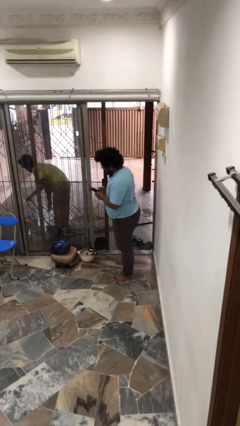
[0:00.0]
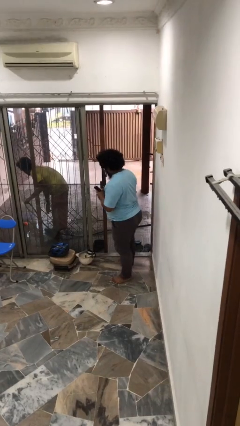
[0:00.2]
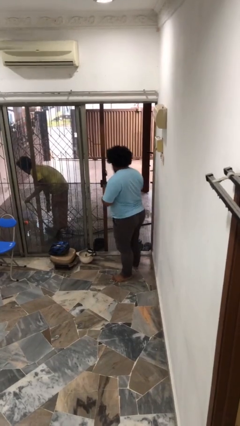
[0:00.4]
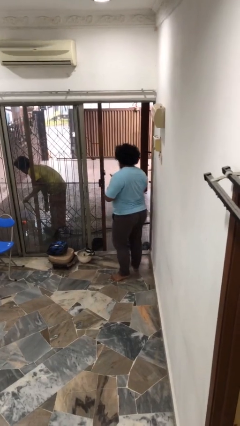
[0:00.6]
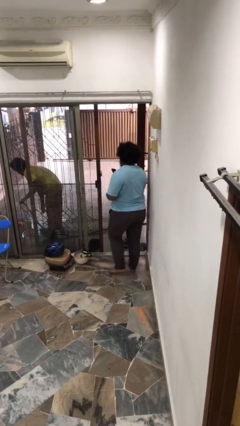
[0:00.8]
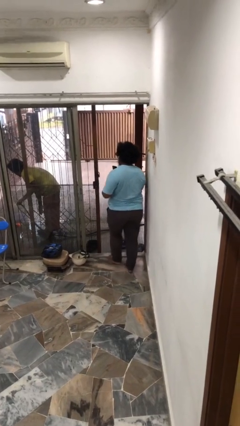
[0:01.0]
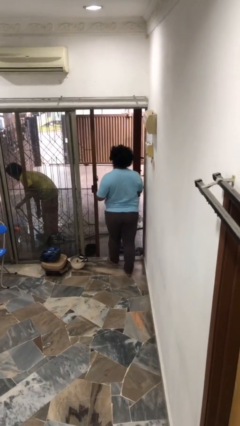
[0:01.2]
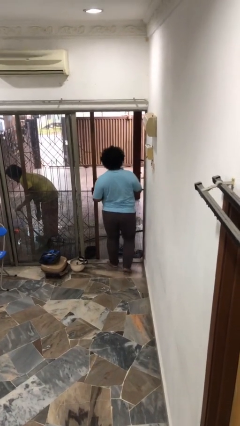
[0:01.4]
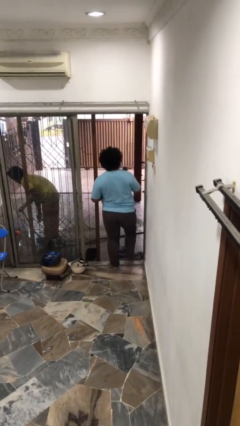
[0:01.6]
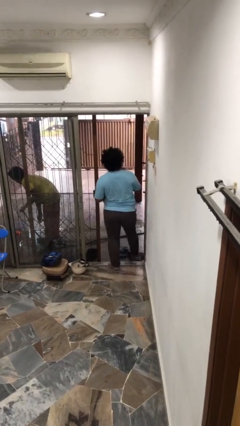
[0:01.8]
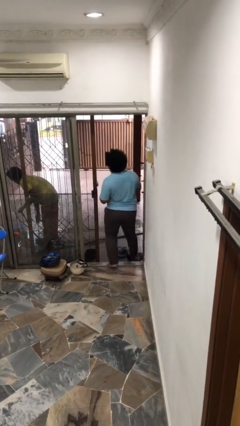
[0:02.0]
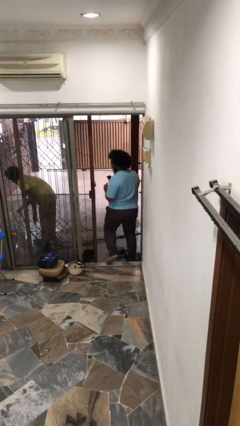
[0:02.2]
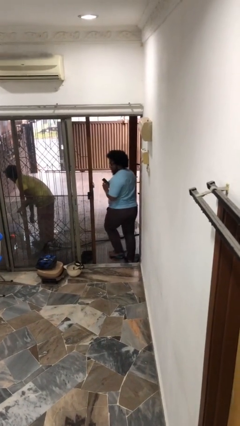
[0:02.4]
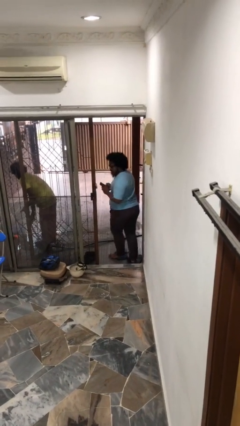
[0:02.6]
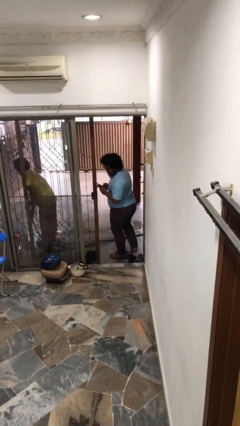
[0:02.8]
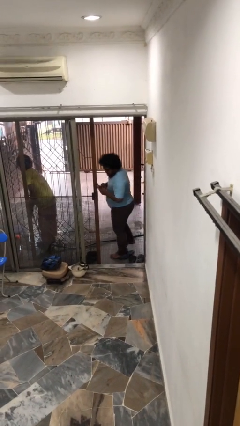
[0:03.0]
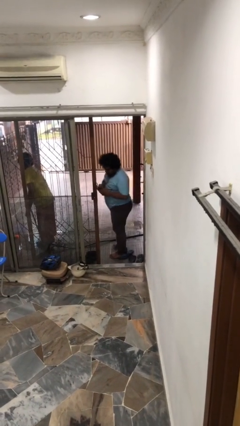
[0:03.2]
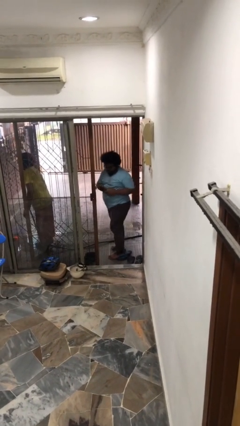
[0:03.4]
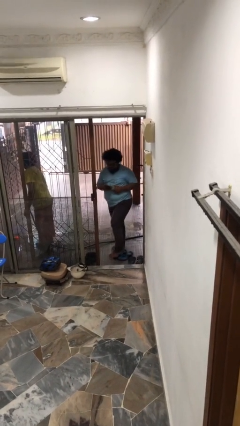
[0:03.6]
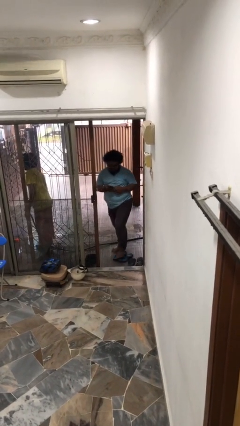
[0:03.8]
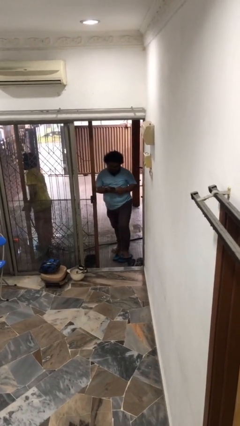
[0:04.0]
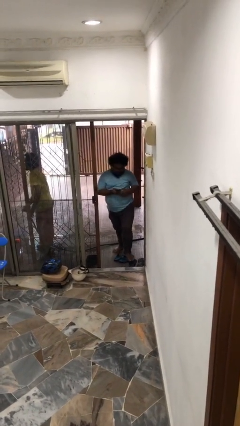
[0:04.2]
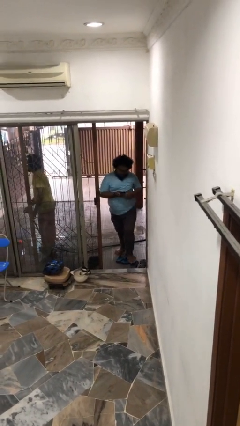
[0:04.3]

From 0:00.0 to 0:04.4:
person exits scene through structure

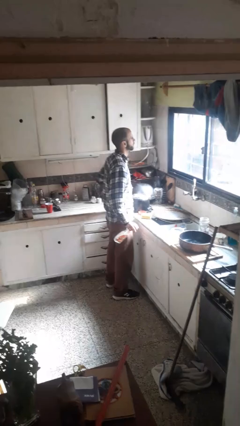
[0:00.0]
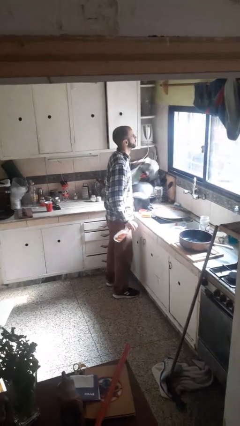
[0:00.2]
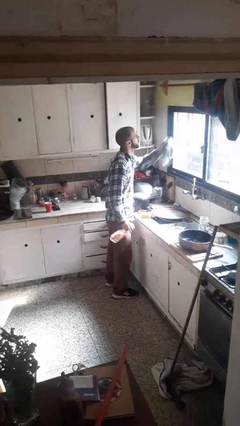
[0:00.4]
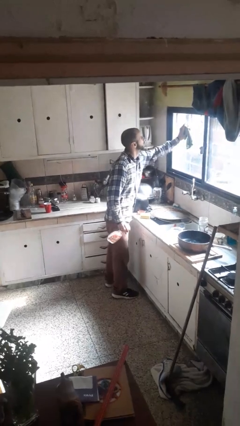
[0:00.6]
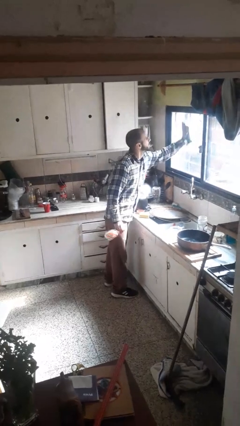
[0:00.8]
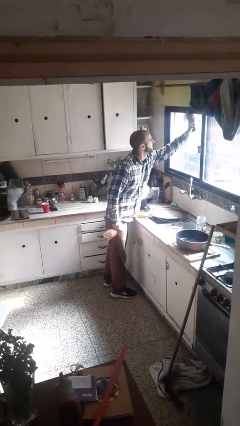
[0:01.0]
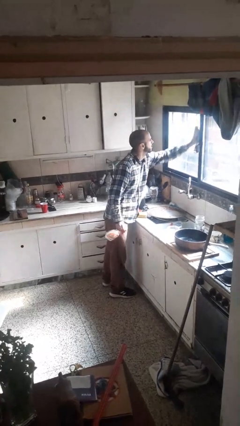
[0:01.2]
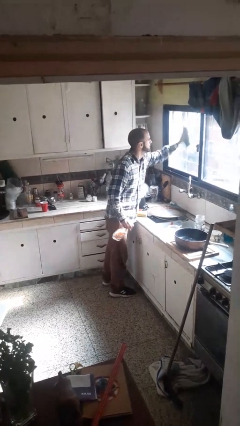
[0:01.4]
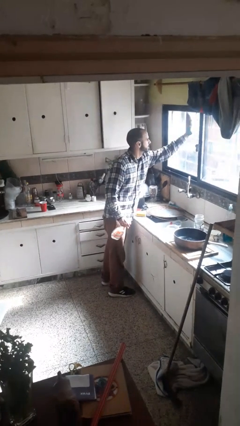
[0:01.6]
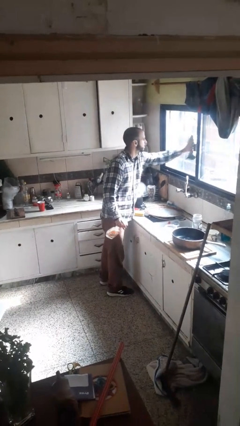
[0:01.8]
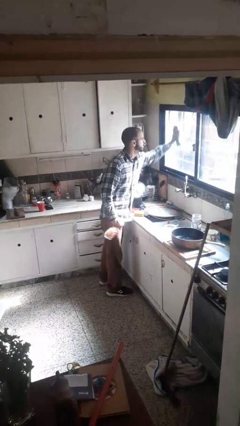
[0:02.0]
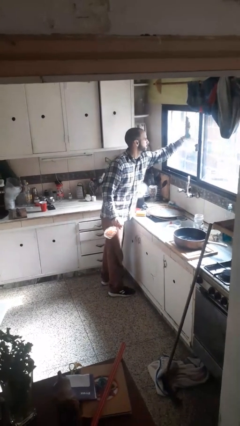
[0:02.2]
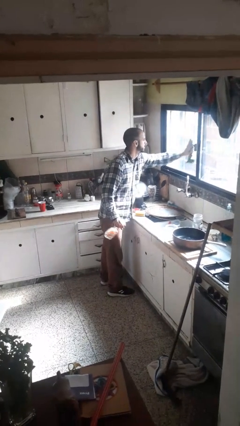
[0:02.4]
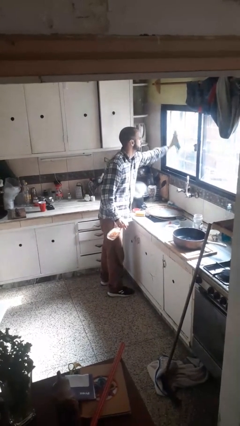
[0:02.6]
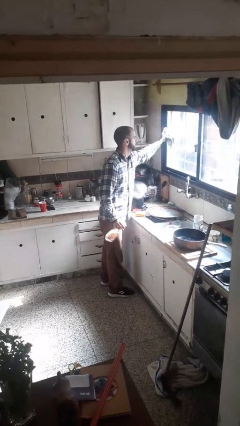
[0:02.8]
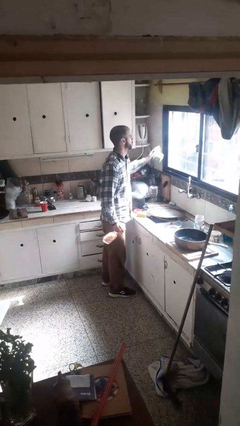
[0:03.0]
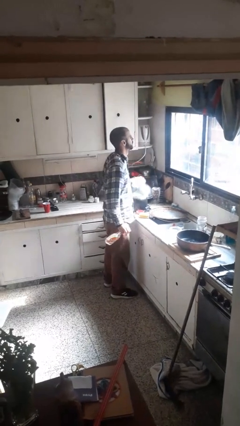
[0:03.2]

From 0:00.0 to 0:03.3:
person washes window

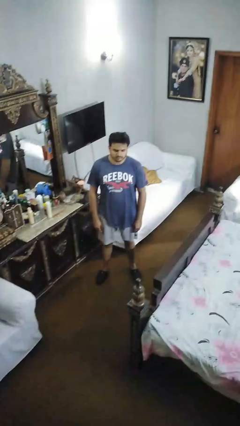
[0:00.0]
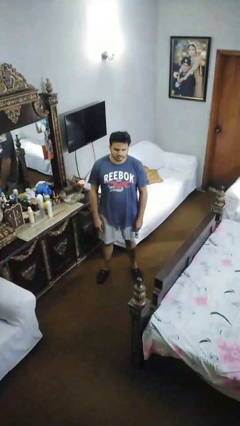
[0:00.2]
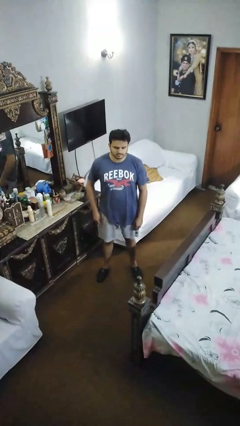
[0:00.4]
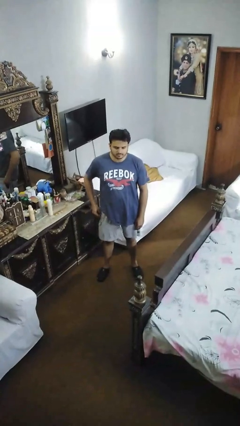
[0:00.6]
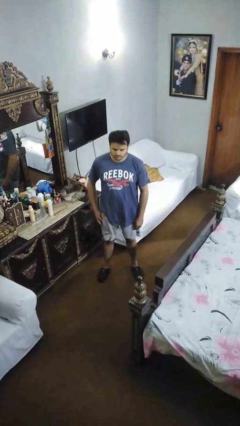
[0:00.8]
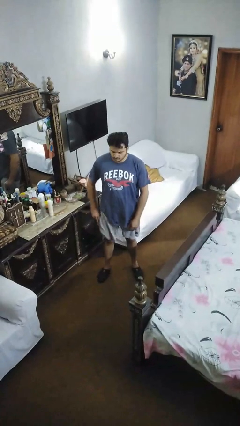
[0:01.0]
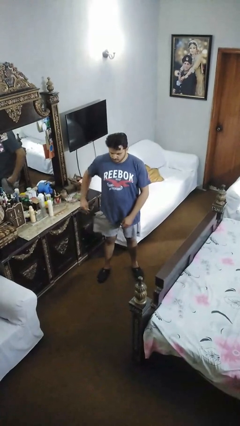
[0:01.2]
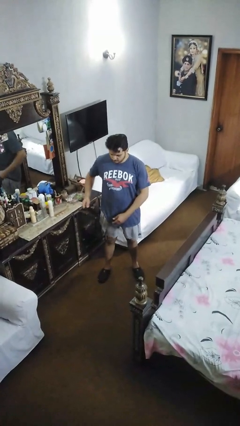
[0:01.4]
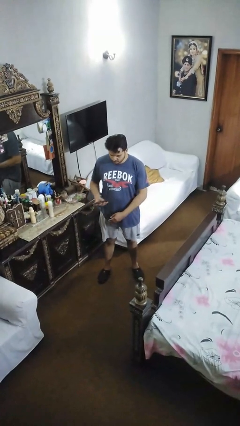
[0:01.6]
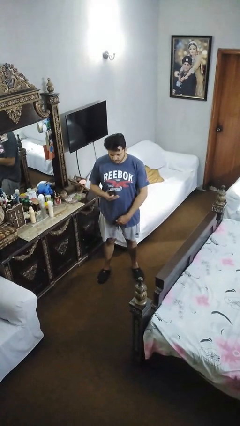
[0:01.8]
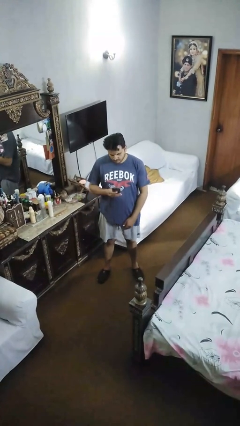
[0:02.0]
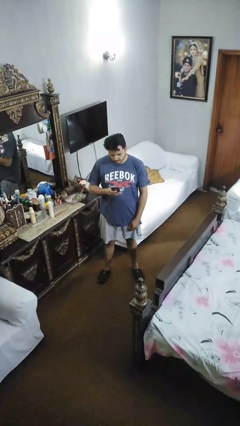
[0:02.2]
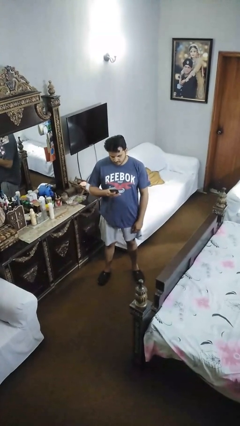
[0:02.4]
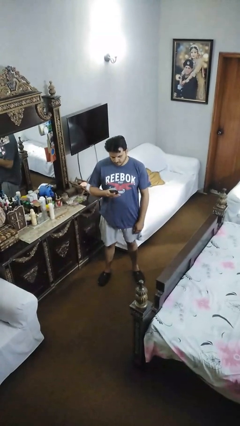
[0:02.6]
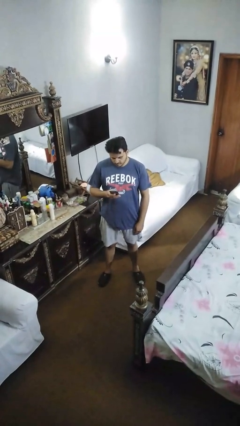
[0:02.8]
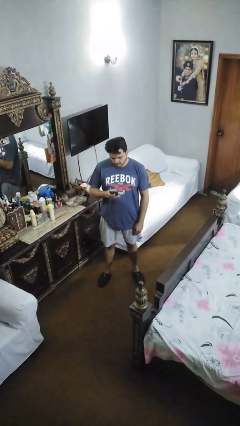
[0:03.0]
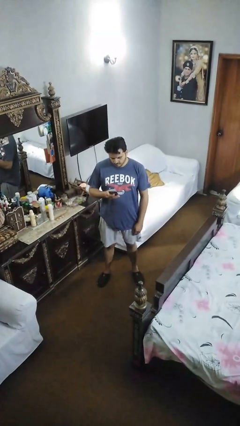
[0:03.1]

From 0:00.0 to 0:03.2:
person takes phone from pocket

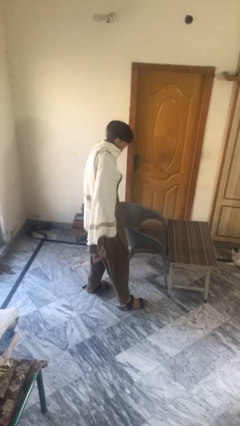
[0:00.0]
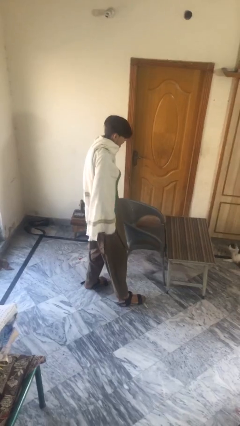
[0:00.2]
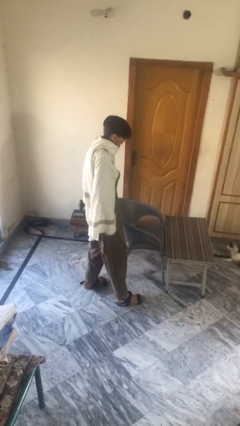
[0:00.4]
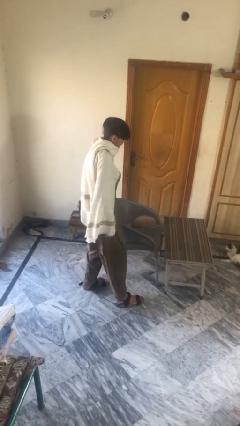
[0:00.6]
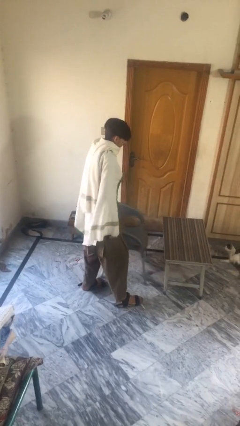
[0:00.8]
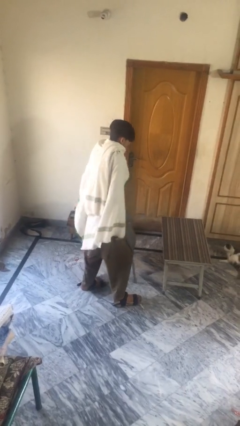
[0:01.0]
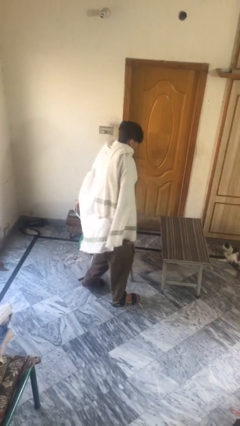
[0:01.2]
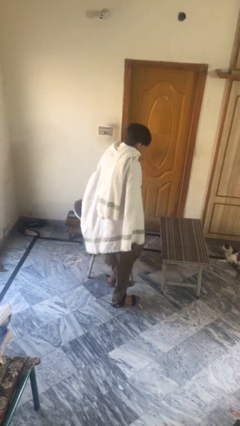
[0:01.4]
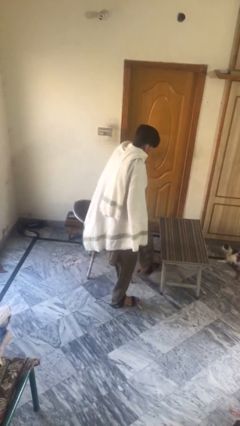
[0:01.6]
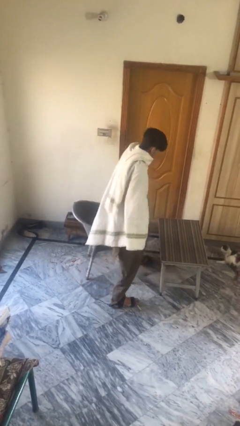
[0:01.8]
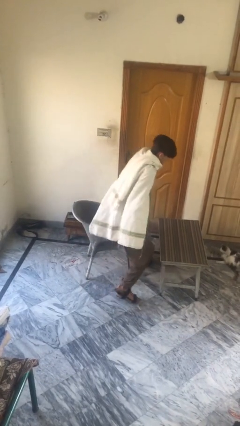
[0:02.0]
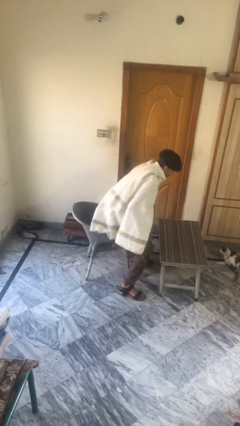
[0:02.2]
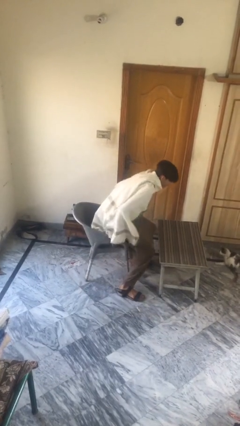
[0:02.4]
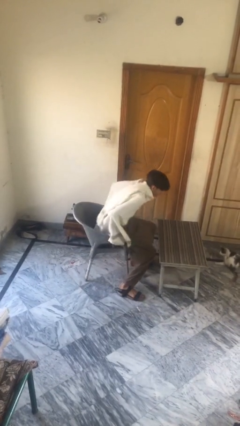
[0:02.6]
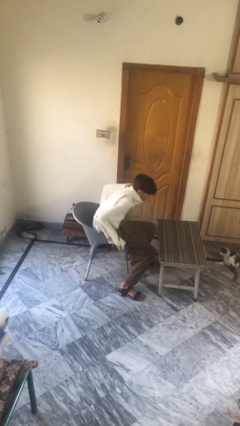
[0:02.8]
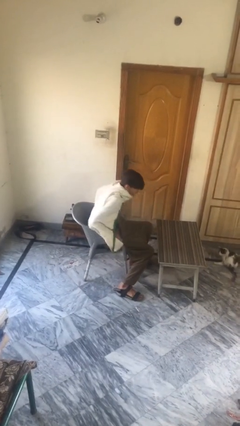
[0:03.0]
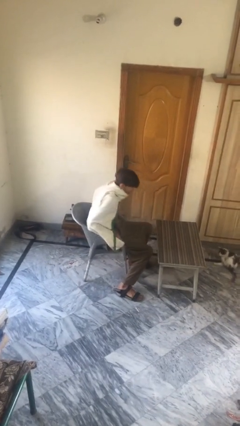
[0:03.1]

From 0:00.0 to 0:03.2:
person sits down

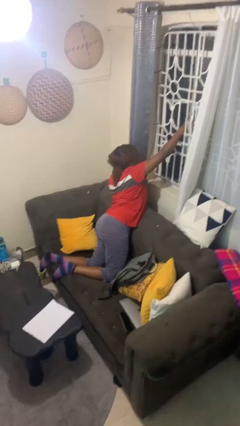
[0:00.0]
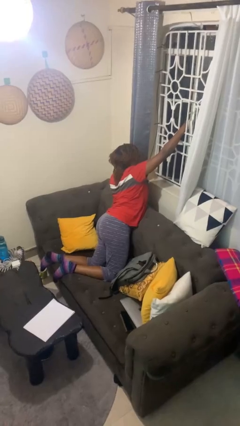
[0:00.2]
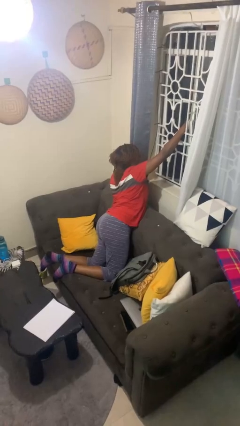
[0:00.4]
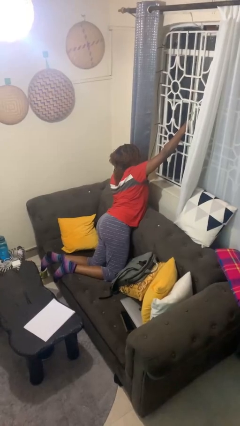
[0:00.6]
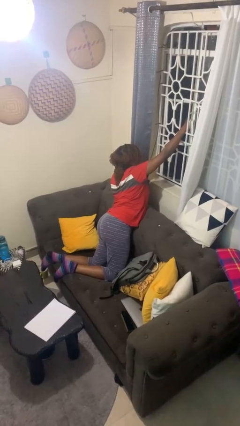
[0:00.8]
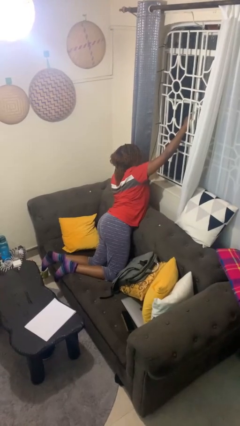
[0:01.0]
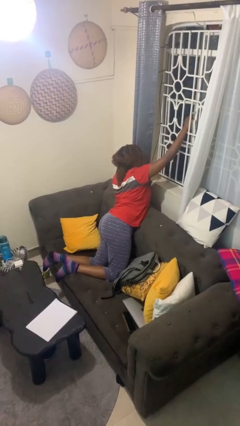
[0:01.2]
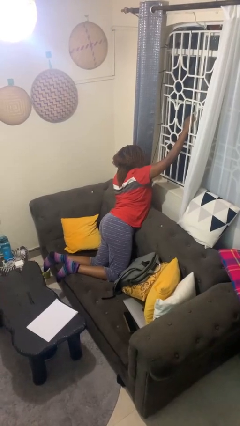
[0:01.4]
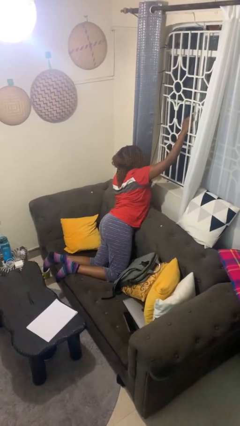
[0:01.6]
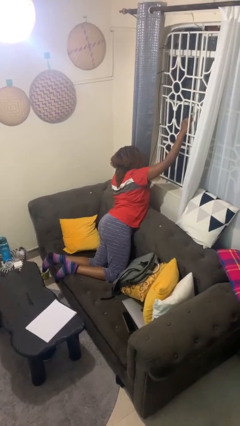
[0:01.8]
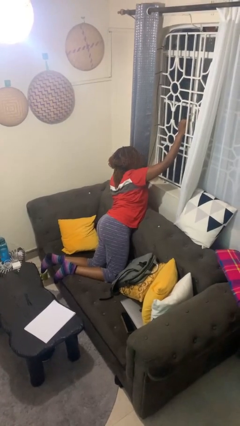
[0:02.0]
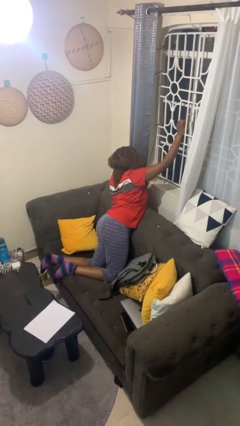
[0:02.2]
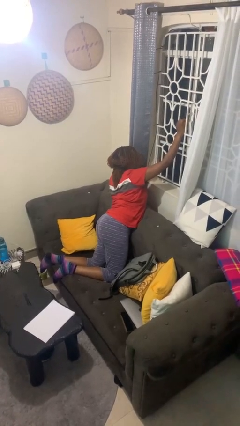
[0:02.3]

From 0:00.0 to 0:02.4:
person closes home window

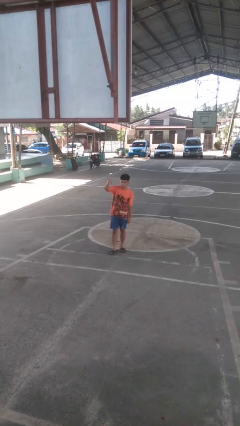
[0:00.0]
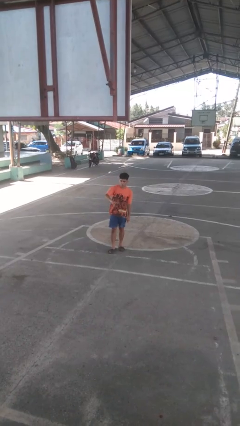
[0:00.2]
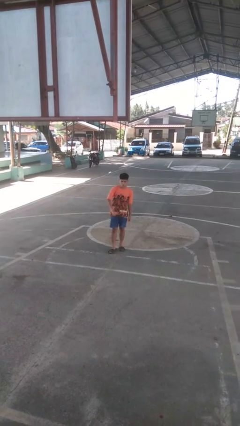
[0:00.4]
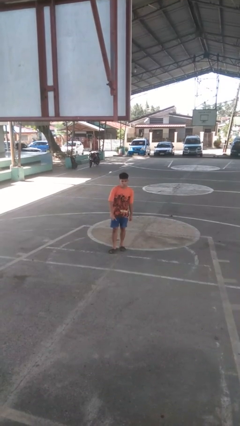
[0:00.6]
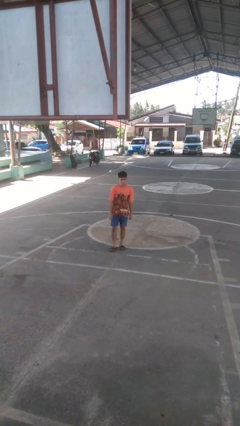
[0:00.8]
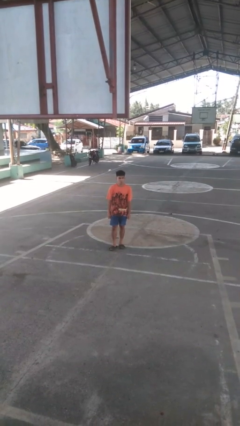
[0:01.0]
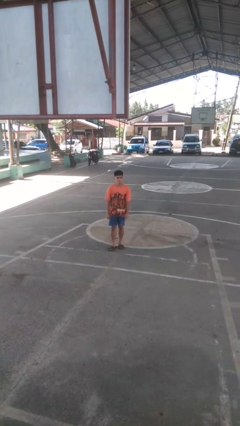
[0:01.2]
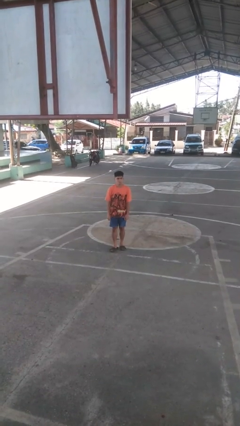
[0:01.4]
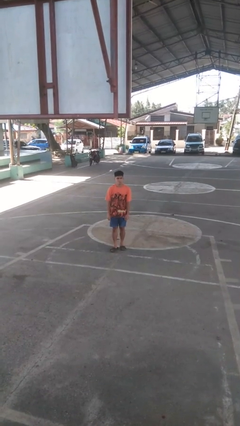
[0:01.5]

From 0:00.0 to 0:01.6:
person gestures swipe down
